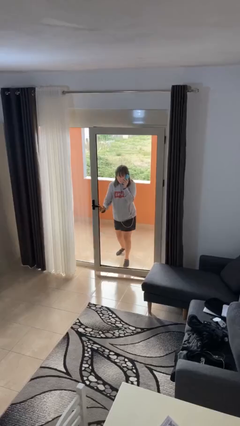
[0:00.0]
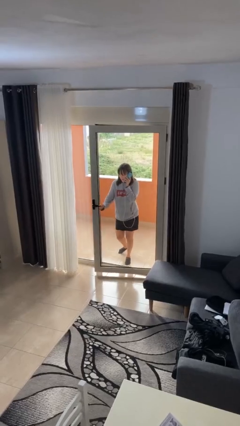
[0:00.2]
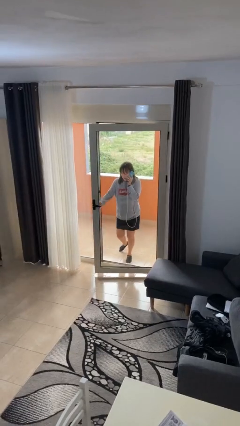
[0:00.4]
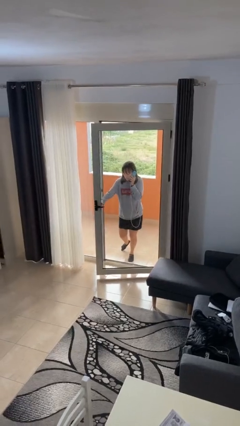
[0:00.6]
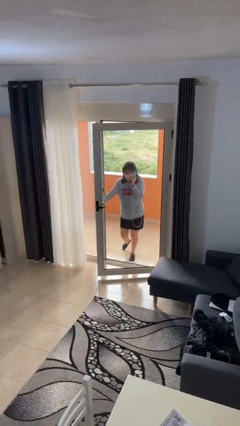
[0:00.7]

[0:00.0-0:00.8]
person opens facility door

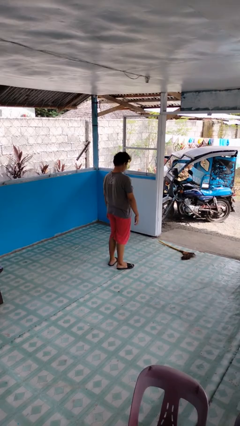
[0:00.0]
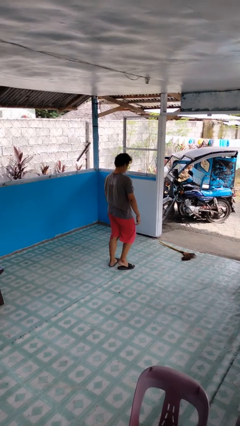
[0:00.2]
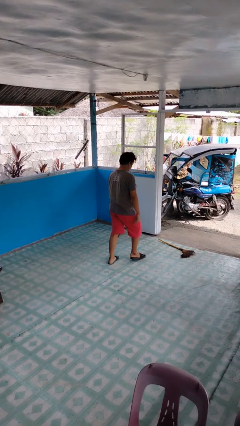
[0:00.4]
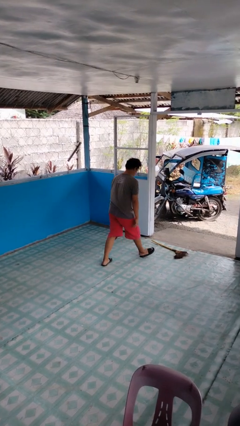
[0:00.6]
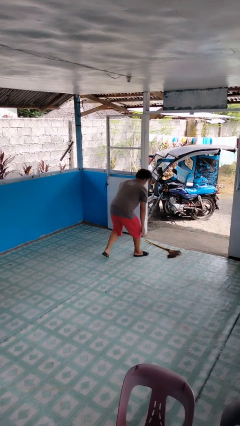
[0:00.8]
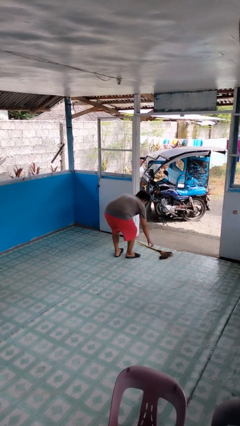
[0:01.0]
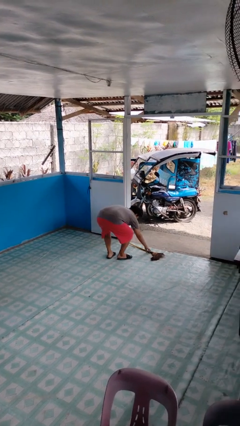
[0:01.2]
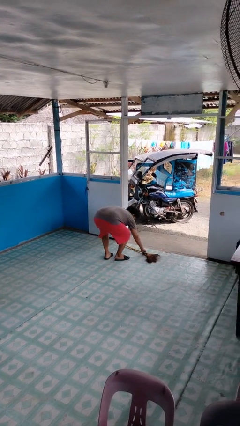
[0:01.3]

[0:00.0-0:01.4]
person picks up object from floor

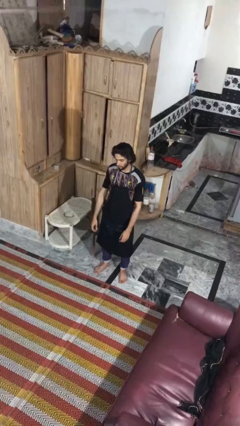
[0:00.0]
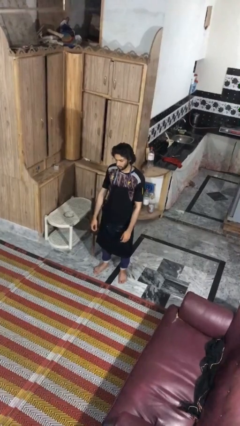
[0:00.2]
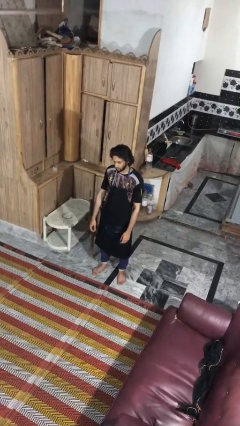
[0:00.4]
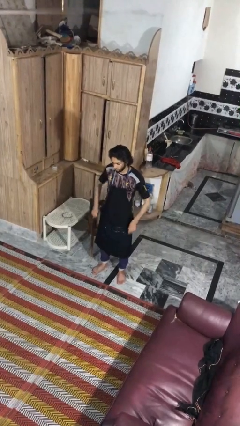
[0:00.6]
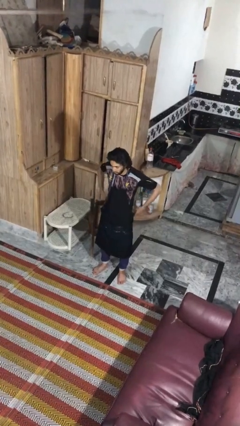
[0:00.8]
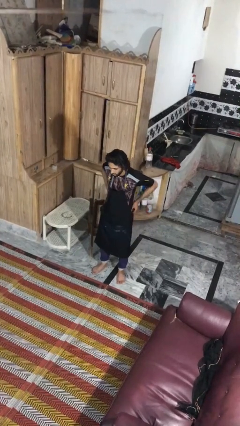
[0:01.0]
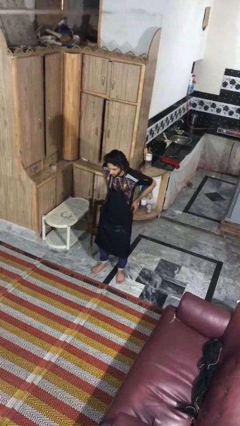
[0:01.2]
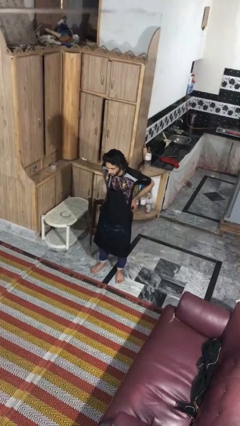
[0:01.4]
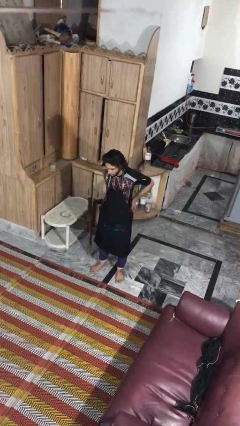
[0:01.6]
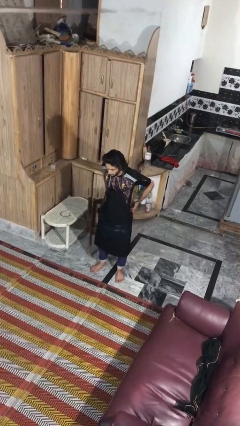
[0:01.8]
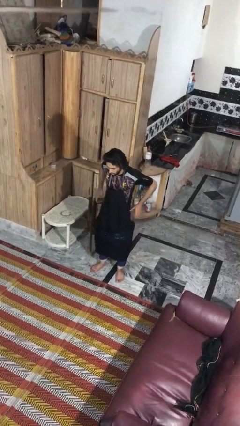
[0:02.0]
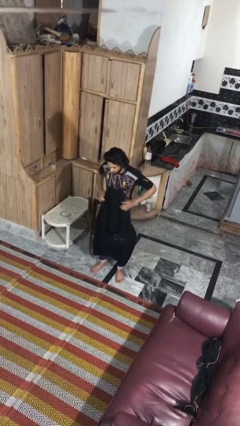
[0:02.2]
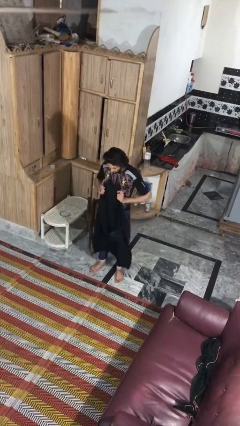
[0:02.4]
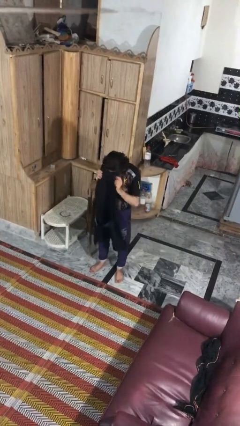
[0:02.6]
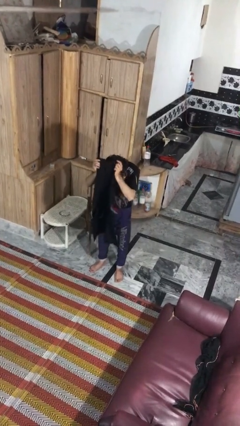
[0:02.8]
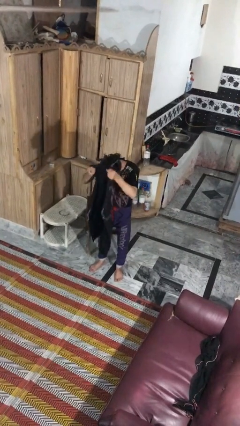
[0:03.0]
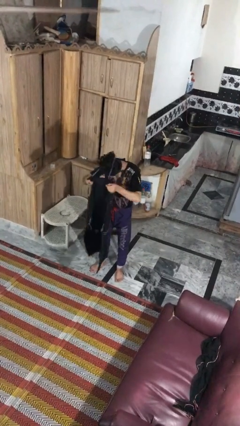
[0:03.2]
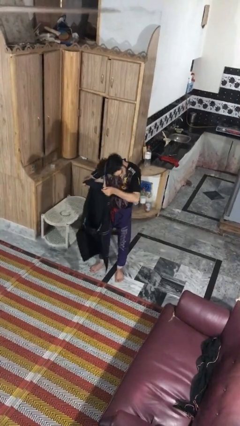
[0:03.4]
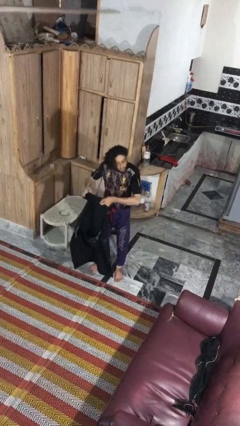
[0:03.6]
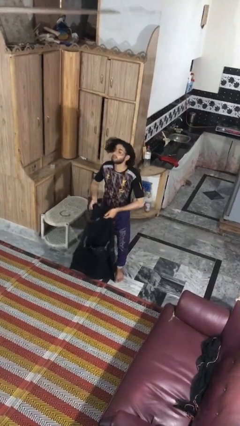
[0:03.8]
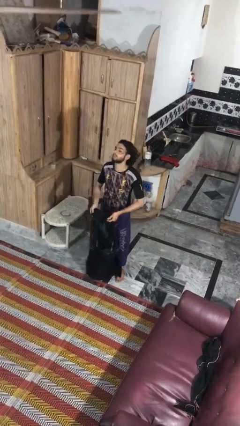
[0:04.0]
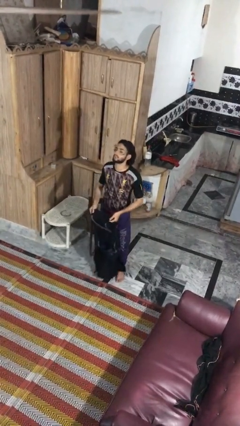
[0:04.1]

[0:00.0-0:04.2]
person takes off apron

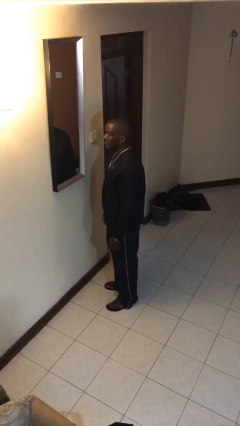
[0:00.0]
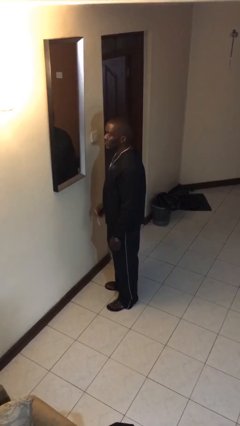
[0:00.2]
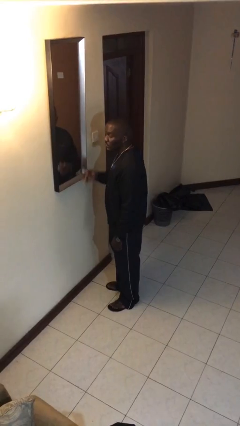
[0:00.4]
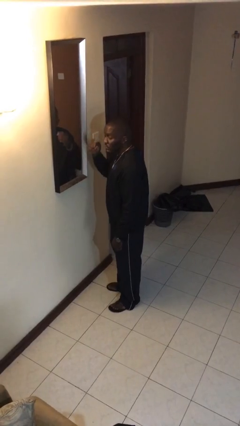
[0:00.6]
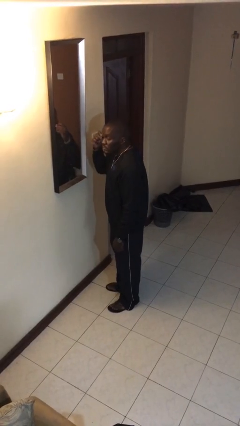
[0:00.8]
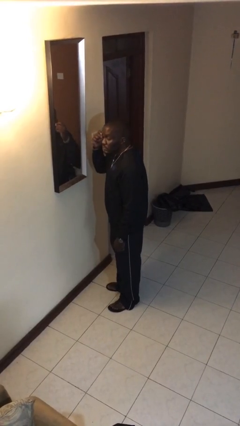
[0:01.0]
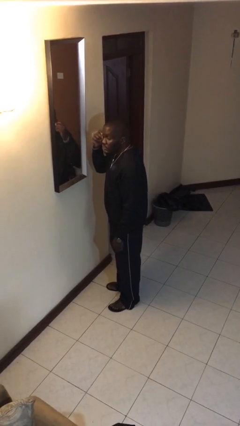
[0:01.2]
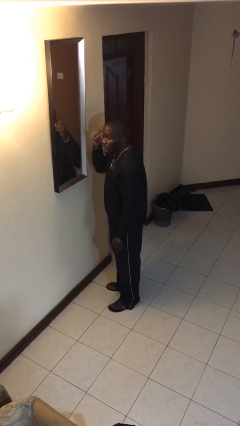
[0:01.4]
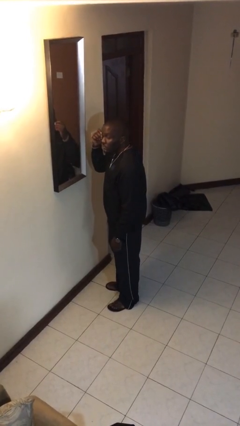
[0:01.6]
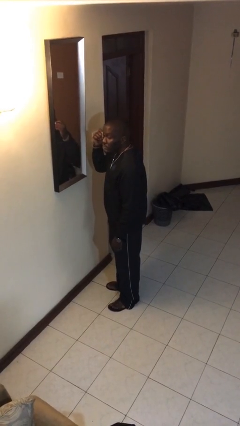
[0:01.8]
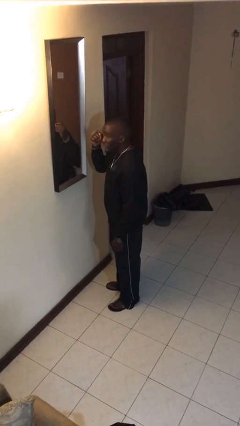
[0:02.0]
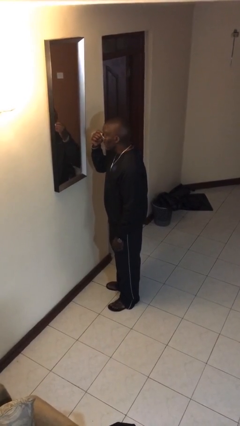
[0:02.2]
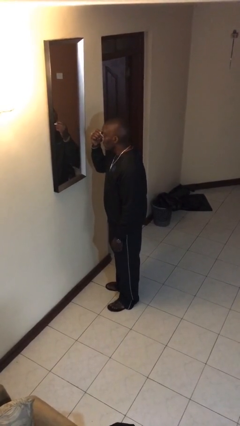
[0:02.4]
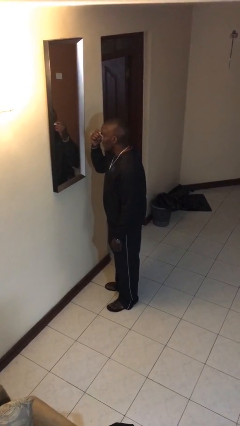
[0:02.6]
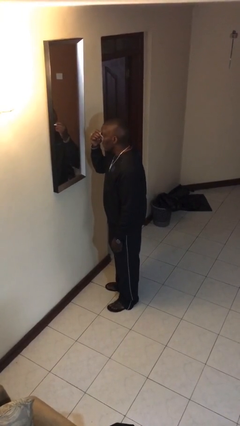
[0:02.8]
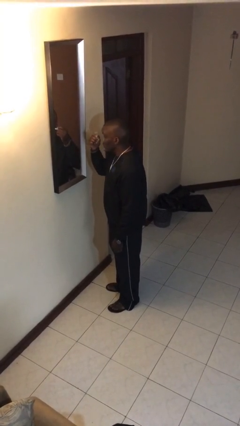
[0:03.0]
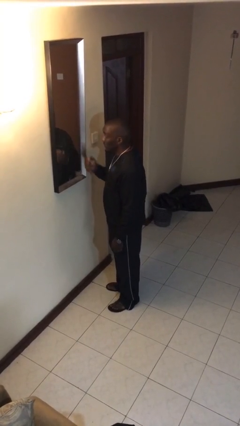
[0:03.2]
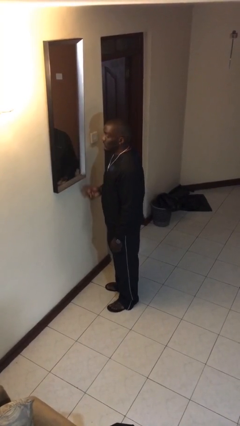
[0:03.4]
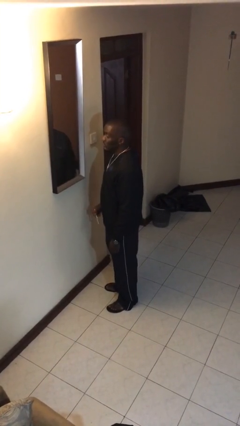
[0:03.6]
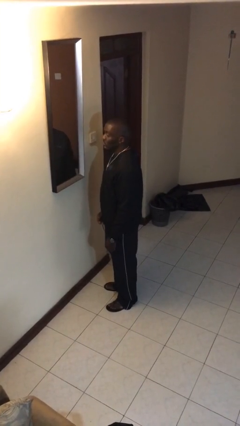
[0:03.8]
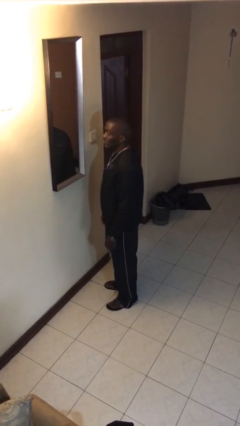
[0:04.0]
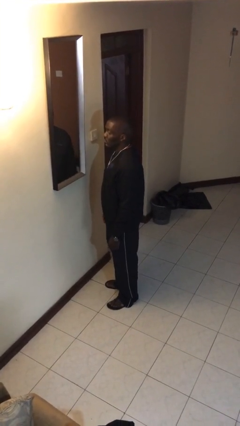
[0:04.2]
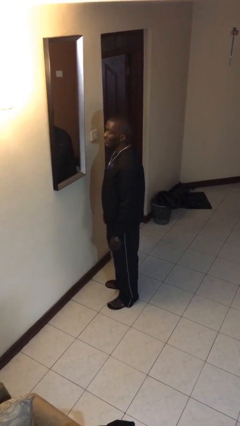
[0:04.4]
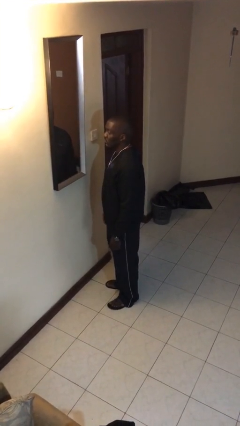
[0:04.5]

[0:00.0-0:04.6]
person applies eye makeup

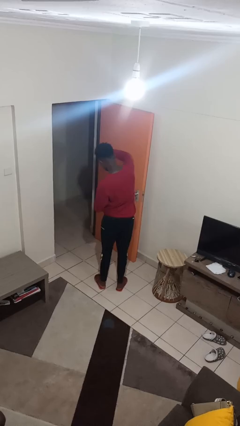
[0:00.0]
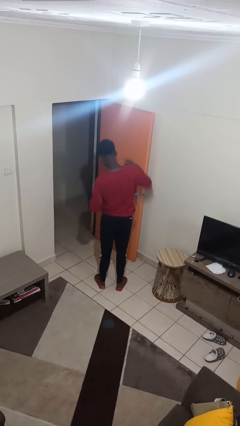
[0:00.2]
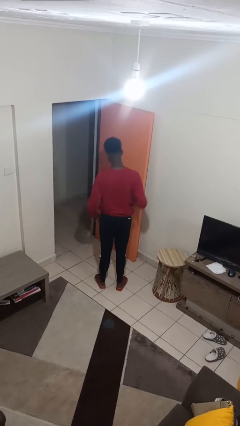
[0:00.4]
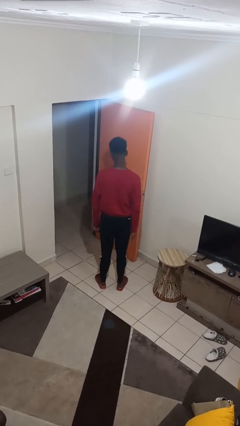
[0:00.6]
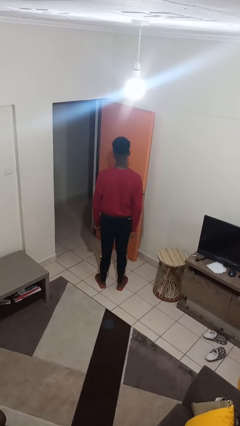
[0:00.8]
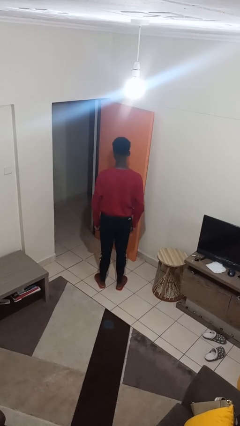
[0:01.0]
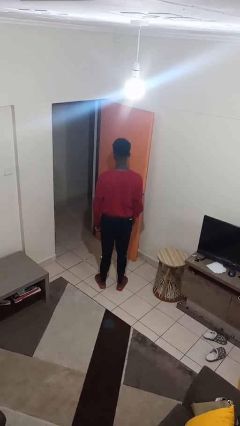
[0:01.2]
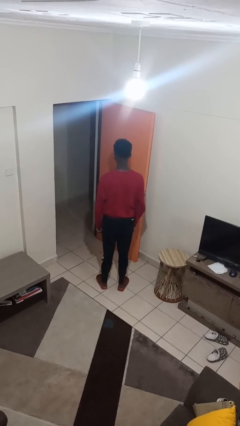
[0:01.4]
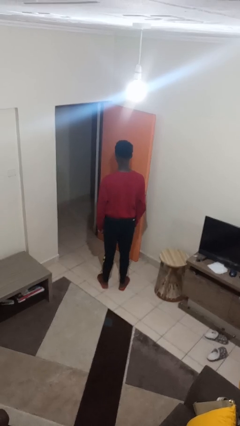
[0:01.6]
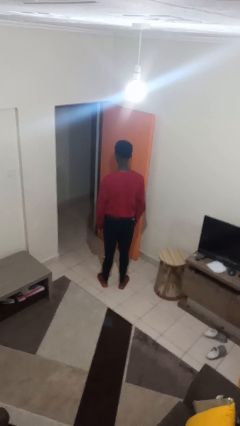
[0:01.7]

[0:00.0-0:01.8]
person punches

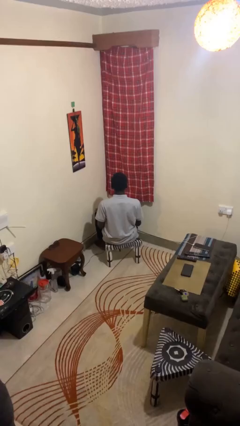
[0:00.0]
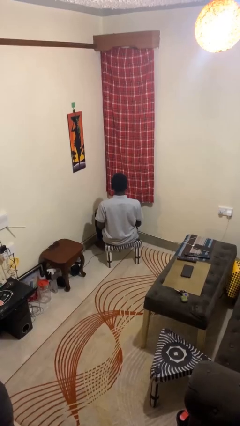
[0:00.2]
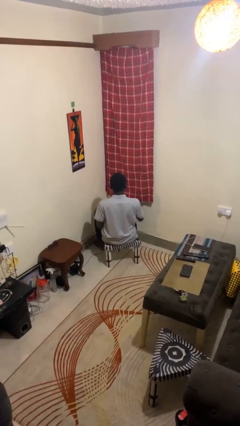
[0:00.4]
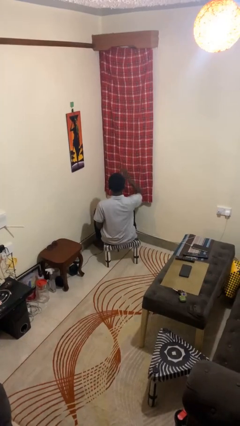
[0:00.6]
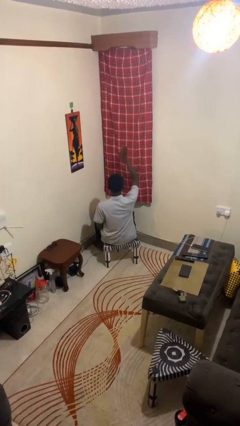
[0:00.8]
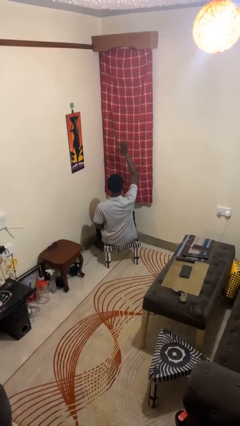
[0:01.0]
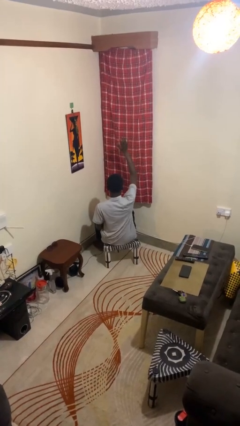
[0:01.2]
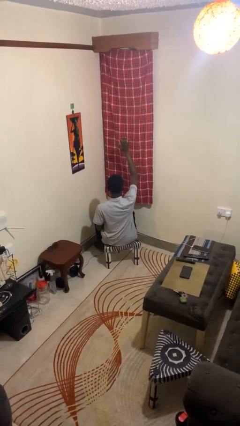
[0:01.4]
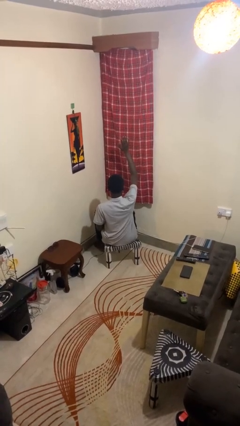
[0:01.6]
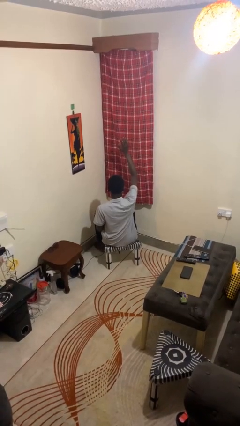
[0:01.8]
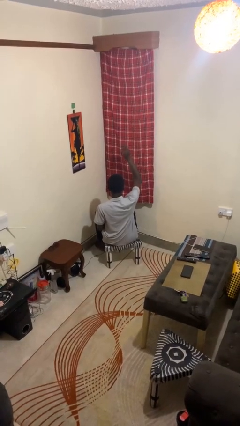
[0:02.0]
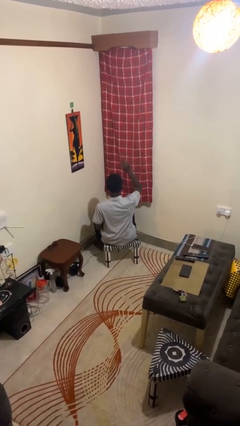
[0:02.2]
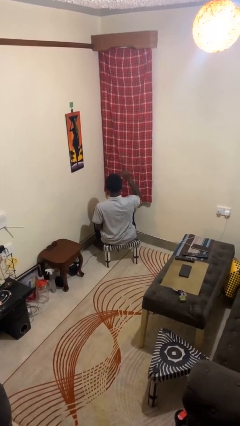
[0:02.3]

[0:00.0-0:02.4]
person gestures raise hand

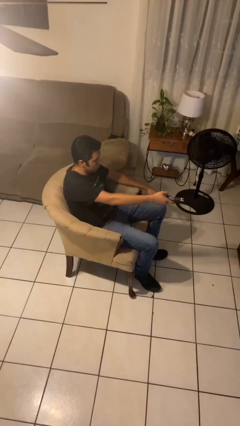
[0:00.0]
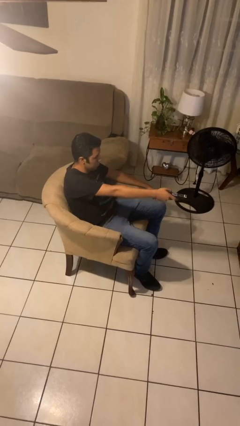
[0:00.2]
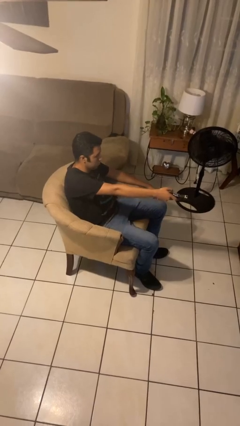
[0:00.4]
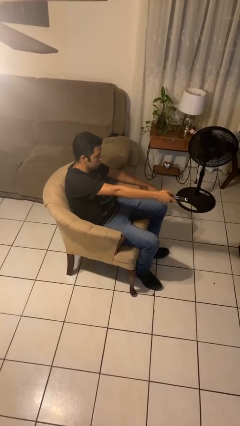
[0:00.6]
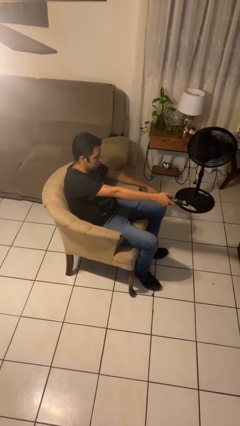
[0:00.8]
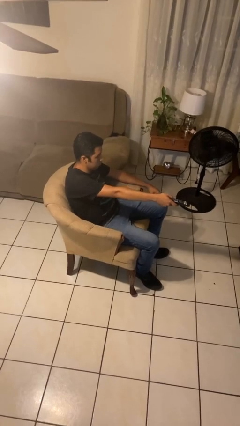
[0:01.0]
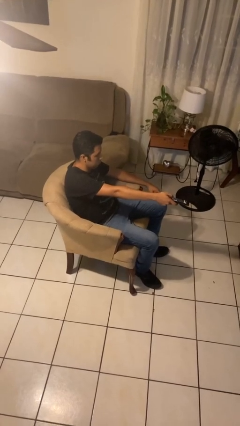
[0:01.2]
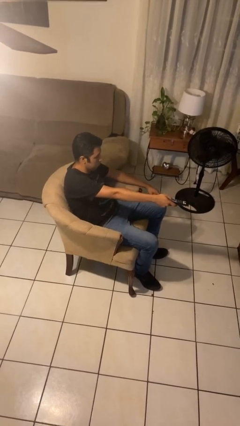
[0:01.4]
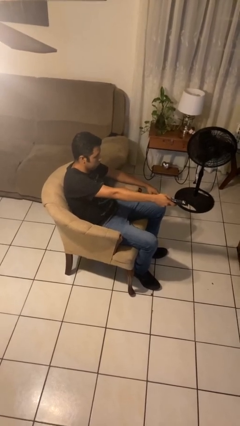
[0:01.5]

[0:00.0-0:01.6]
person uses television remote
